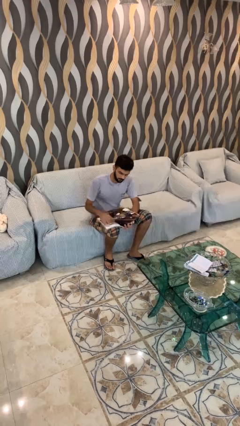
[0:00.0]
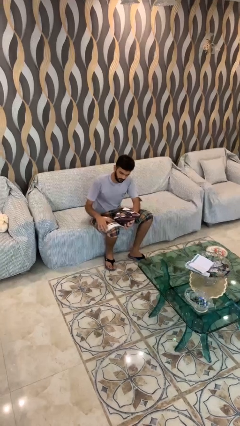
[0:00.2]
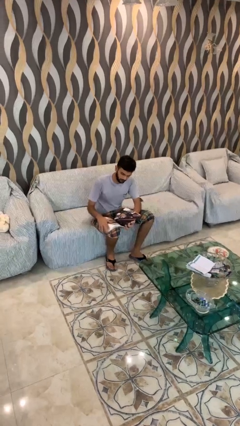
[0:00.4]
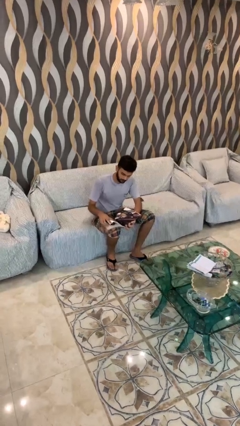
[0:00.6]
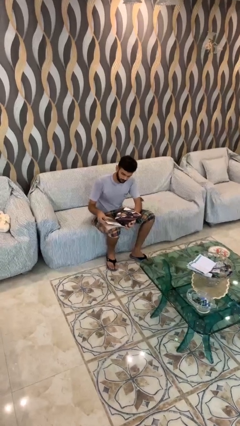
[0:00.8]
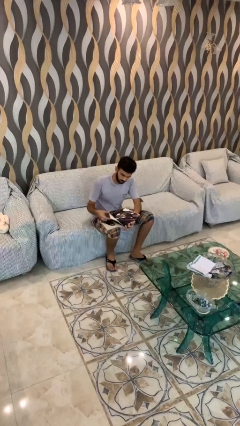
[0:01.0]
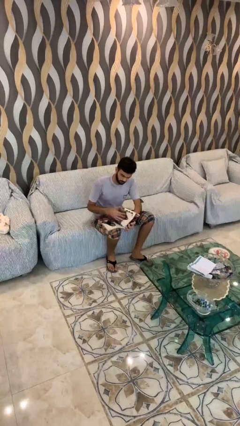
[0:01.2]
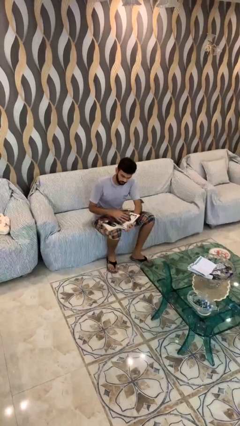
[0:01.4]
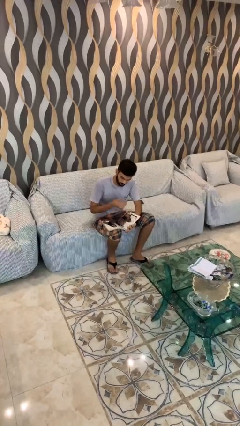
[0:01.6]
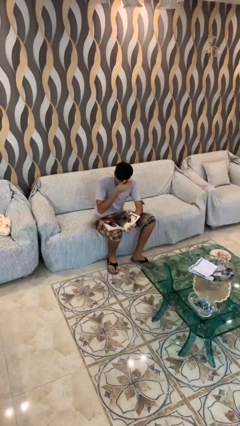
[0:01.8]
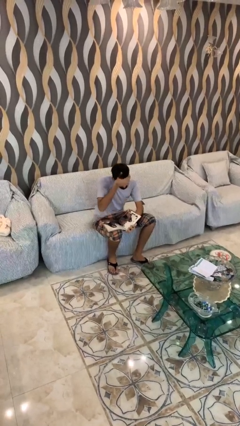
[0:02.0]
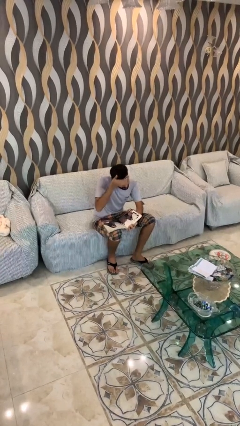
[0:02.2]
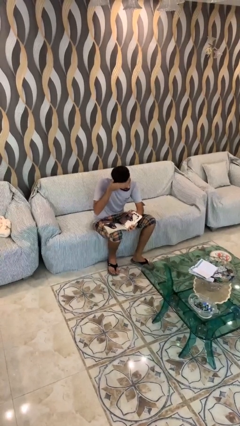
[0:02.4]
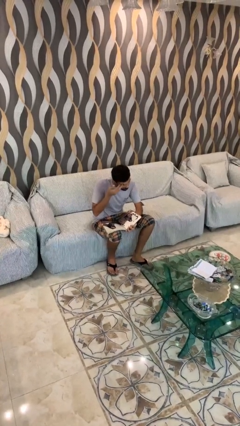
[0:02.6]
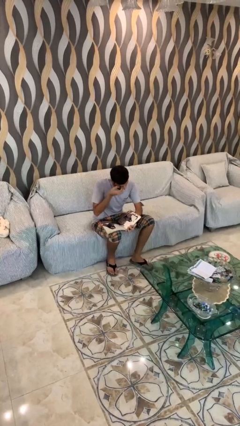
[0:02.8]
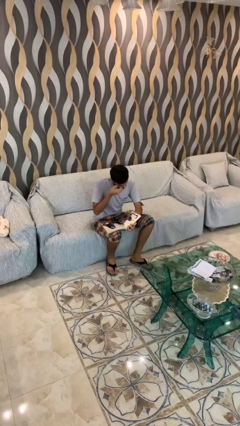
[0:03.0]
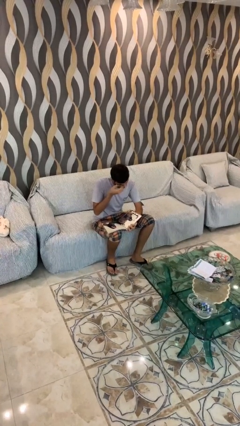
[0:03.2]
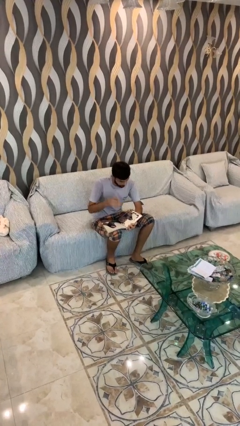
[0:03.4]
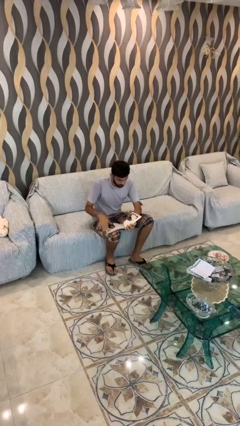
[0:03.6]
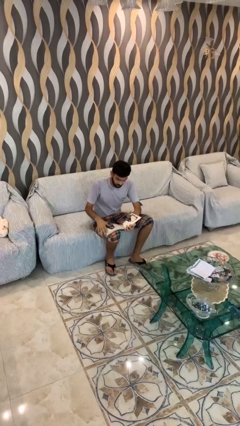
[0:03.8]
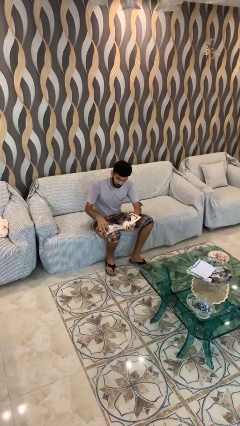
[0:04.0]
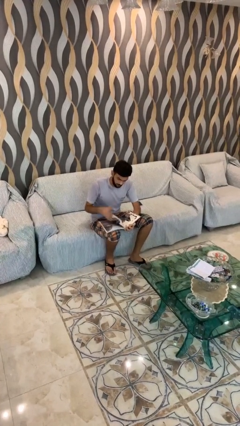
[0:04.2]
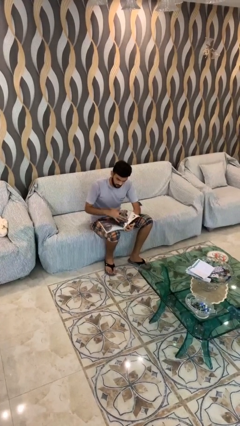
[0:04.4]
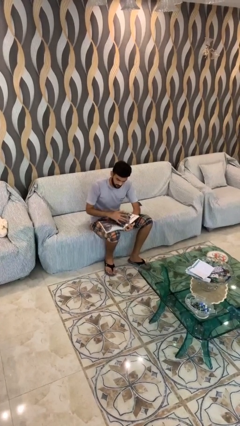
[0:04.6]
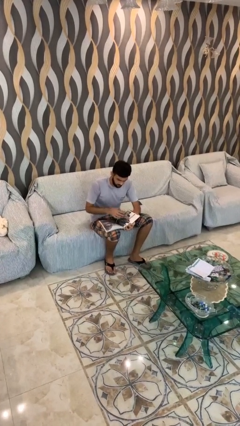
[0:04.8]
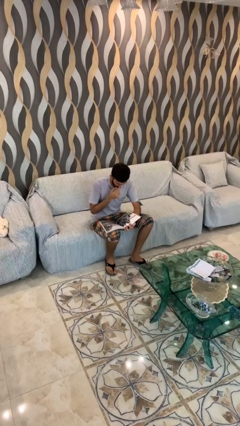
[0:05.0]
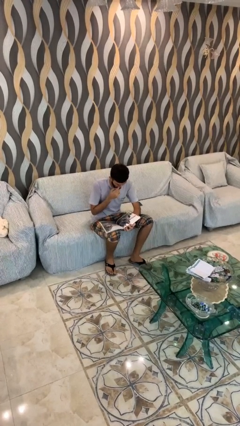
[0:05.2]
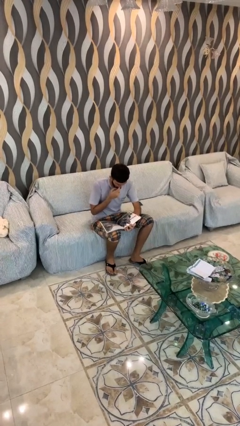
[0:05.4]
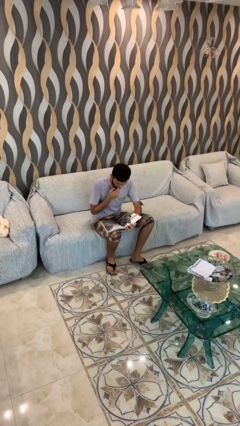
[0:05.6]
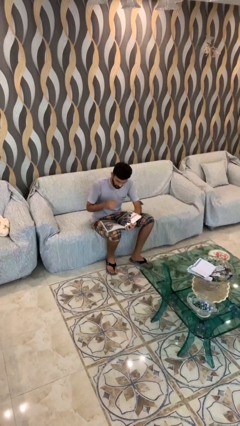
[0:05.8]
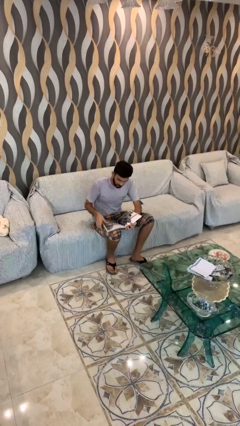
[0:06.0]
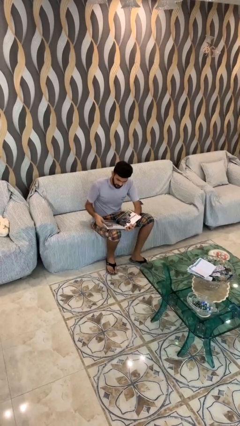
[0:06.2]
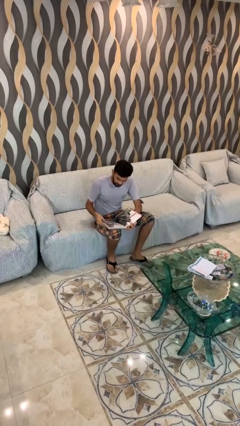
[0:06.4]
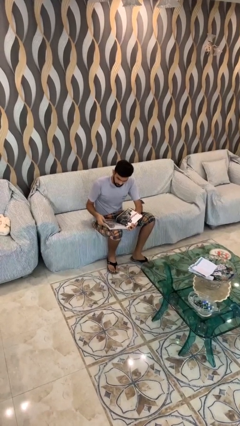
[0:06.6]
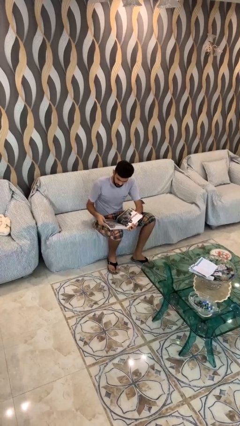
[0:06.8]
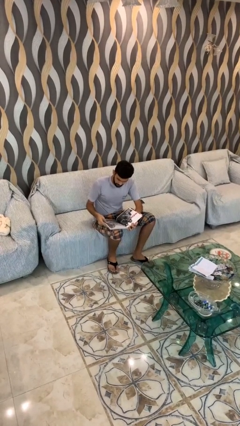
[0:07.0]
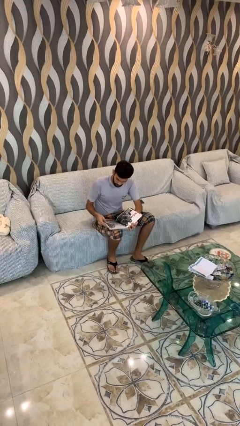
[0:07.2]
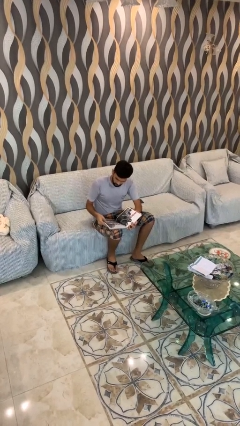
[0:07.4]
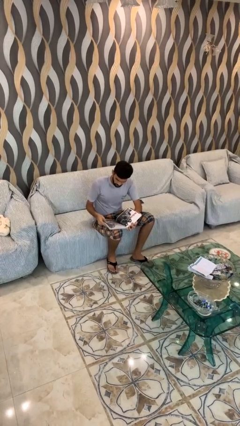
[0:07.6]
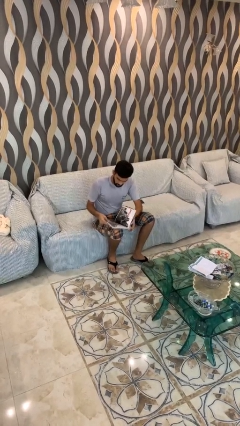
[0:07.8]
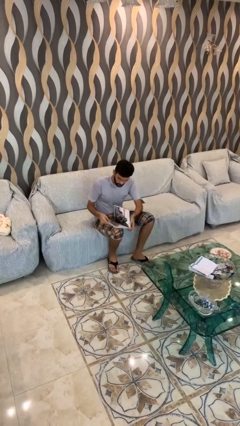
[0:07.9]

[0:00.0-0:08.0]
person reads document

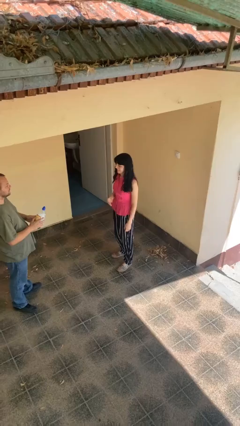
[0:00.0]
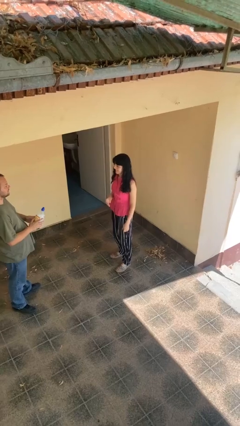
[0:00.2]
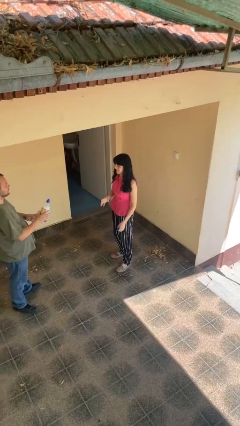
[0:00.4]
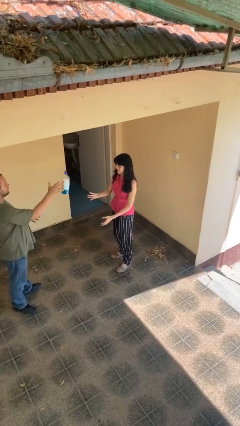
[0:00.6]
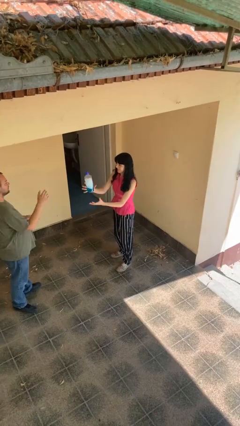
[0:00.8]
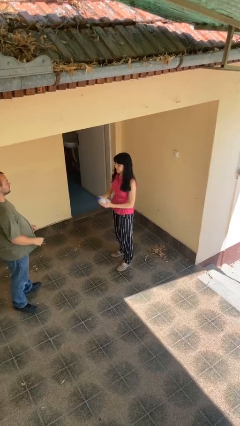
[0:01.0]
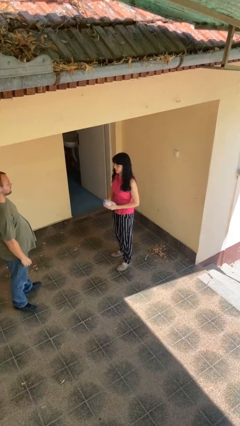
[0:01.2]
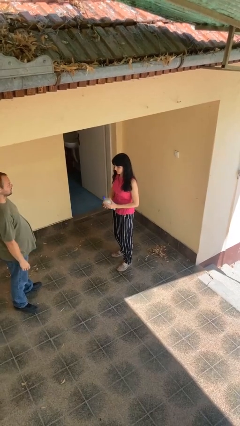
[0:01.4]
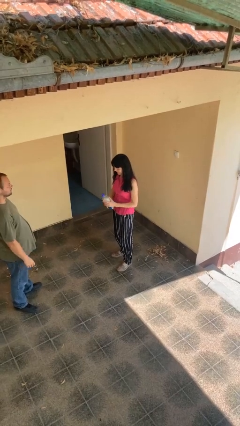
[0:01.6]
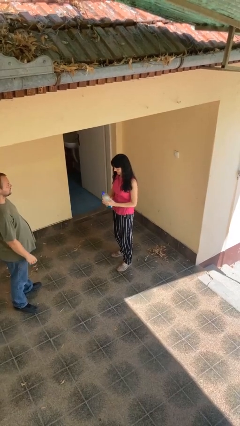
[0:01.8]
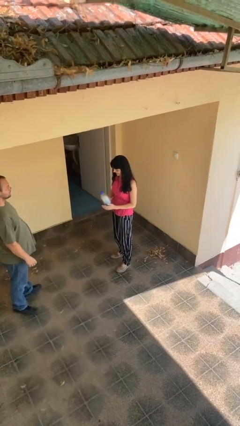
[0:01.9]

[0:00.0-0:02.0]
person catches object from person

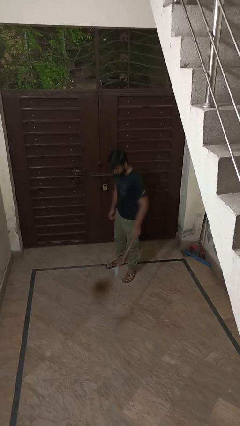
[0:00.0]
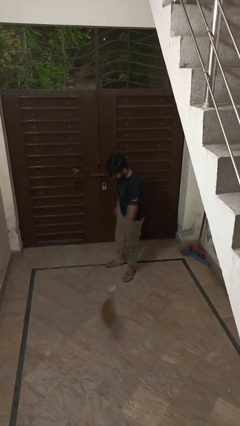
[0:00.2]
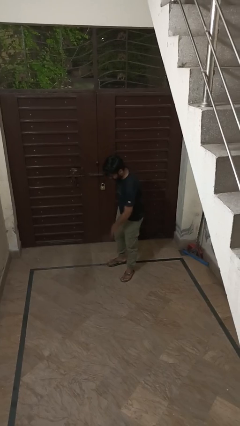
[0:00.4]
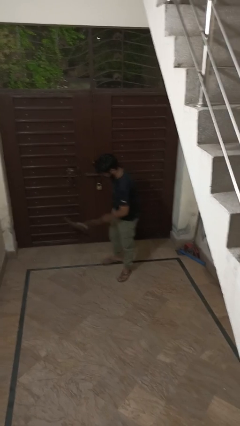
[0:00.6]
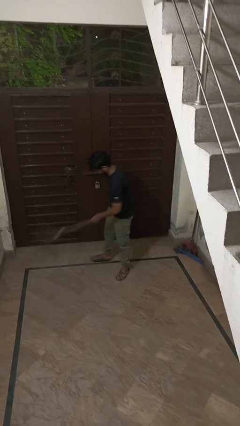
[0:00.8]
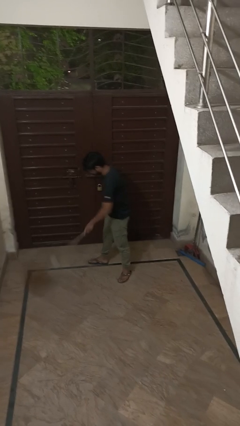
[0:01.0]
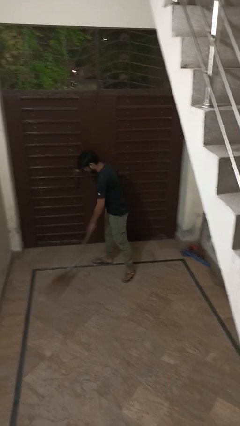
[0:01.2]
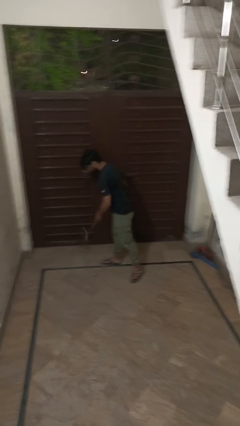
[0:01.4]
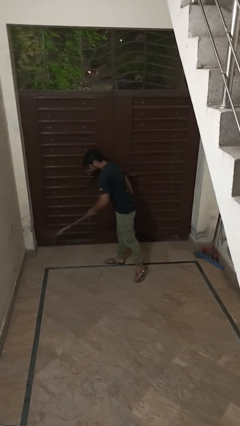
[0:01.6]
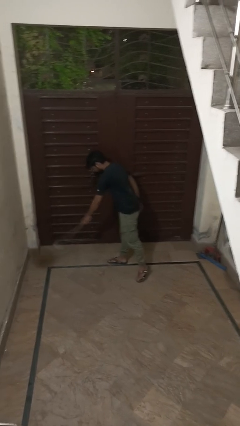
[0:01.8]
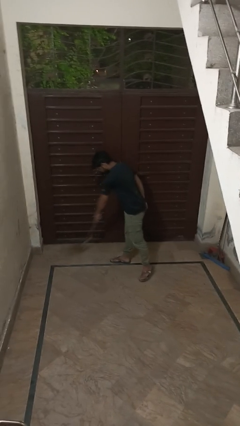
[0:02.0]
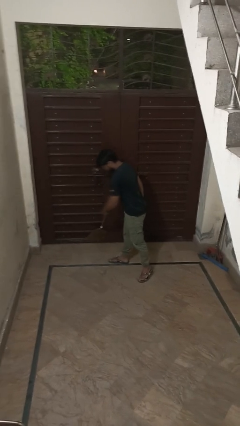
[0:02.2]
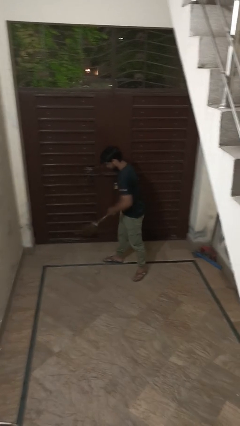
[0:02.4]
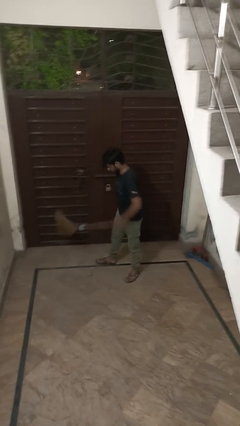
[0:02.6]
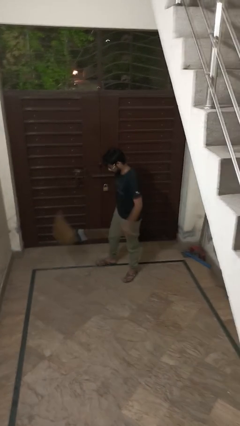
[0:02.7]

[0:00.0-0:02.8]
person sweeps floor

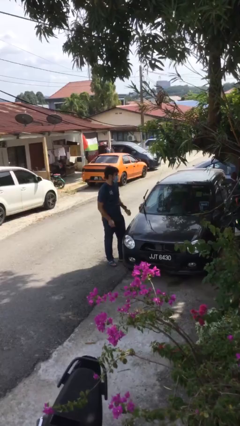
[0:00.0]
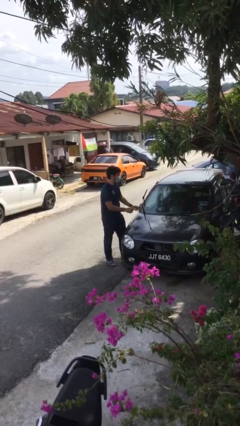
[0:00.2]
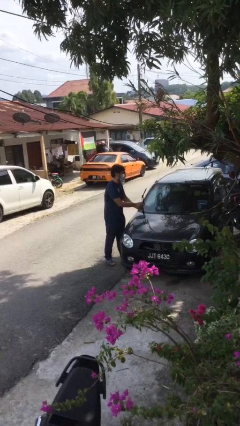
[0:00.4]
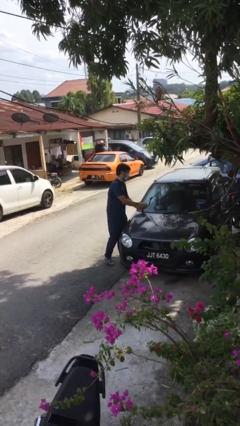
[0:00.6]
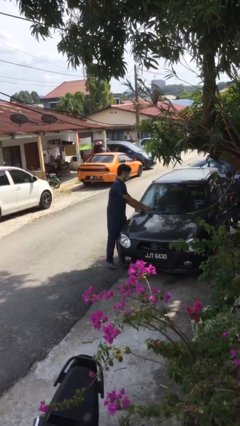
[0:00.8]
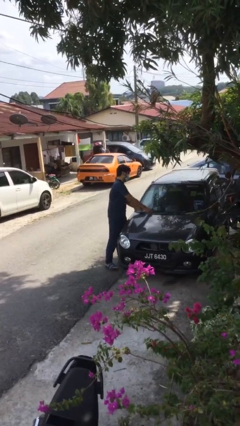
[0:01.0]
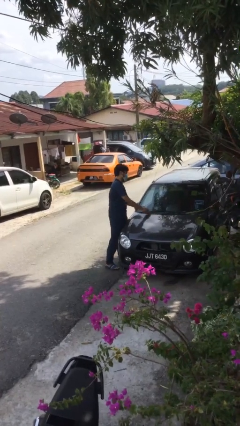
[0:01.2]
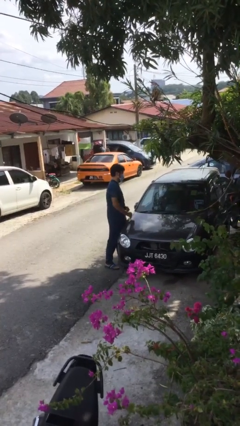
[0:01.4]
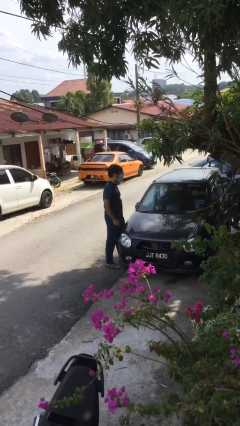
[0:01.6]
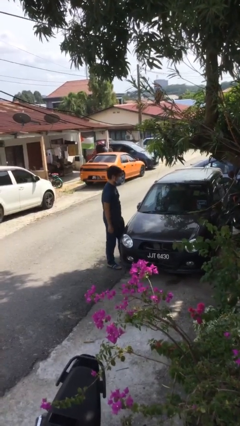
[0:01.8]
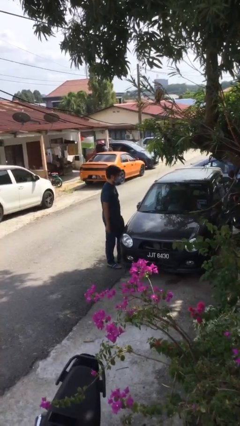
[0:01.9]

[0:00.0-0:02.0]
person flips down car wipers

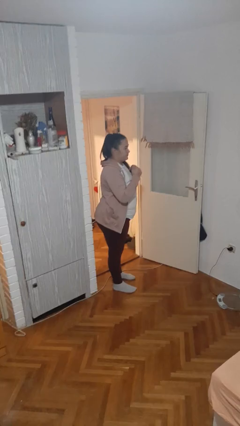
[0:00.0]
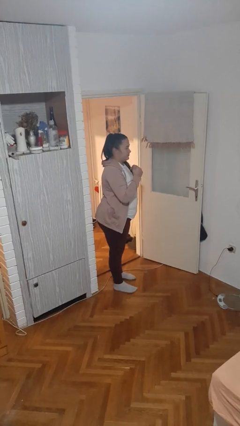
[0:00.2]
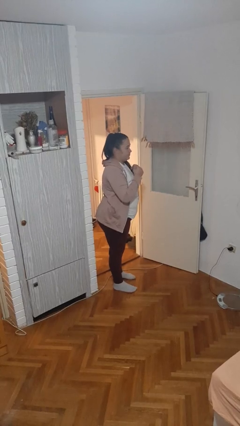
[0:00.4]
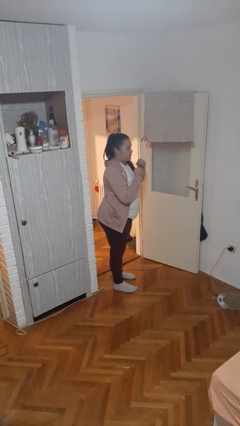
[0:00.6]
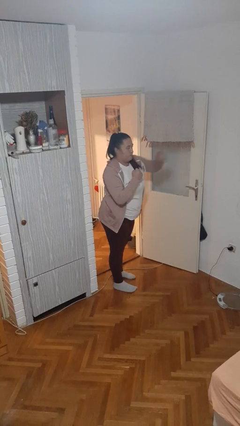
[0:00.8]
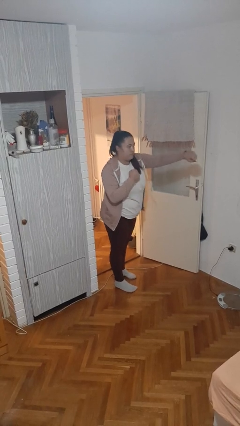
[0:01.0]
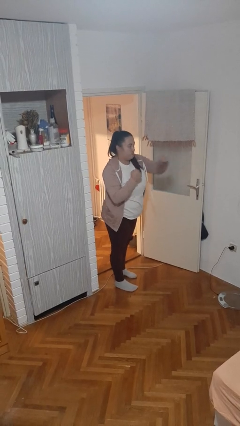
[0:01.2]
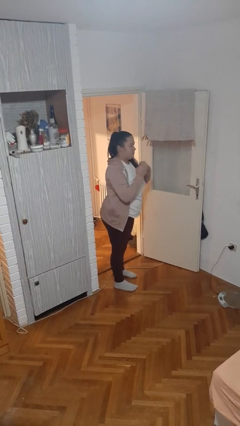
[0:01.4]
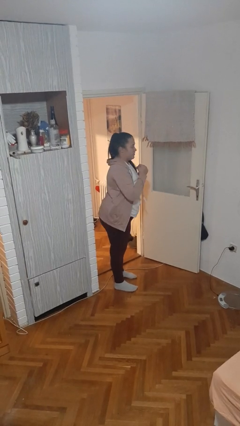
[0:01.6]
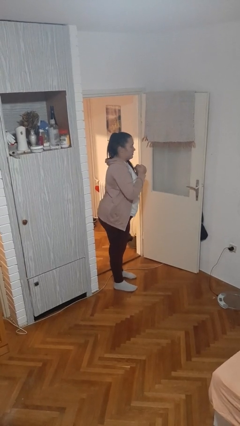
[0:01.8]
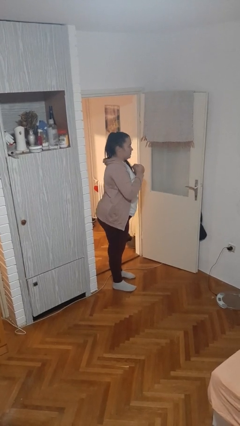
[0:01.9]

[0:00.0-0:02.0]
person punches

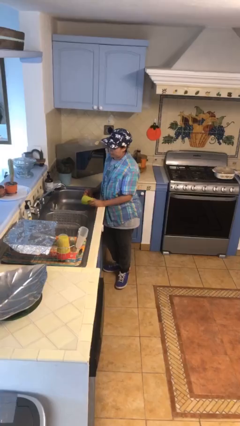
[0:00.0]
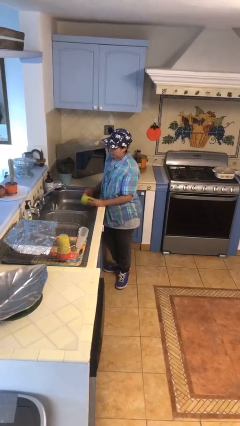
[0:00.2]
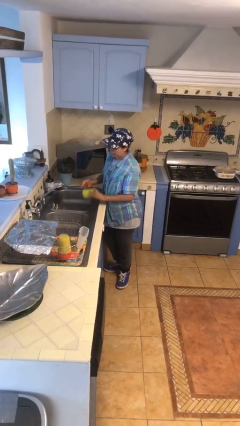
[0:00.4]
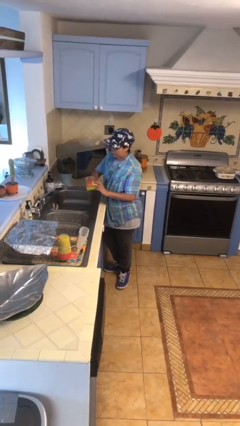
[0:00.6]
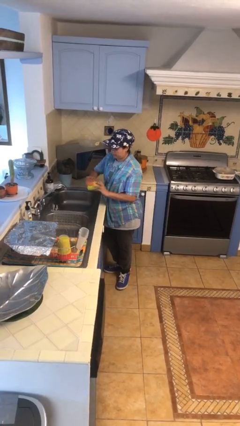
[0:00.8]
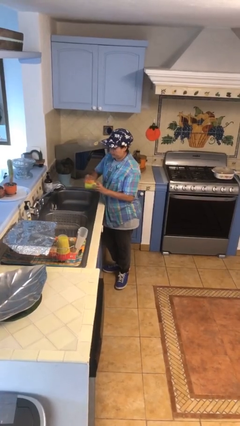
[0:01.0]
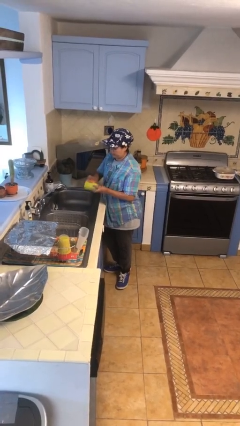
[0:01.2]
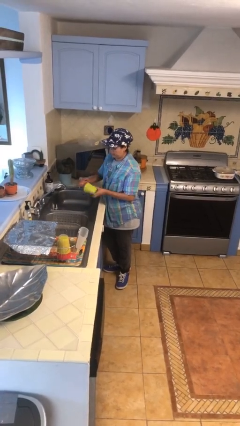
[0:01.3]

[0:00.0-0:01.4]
person washes dish
